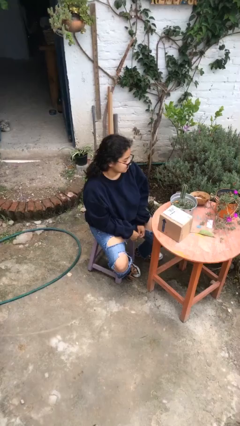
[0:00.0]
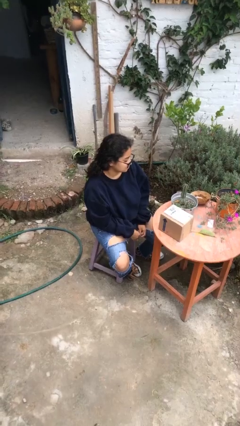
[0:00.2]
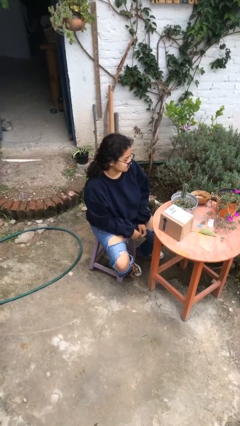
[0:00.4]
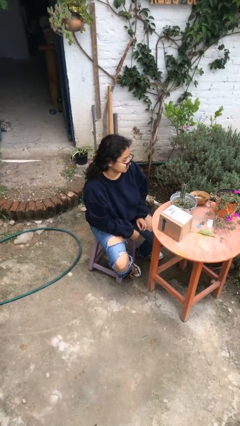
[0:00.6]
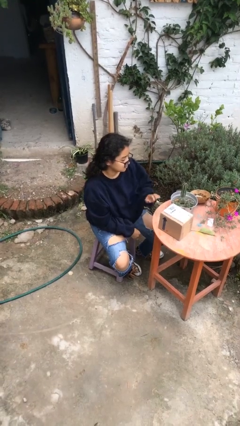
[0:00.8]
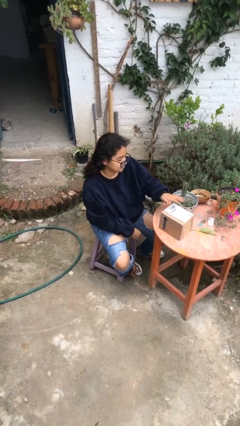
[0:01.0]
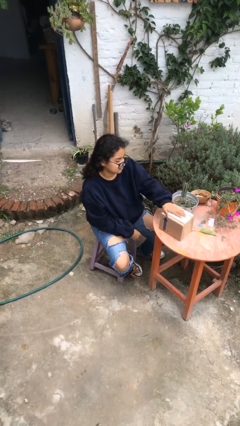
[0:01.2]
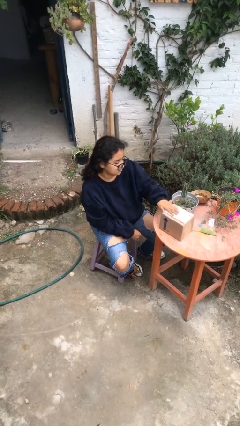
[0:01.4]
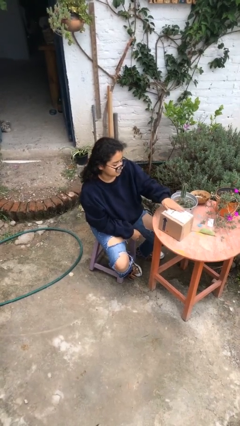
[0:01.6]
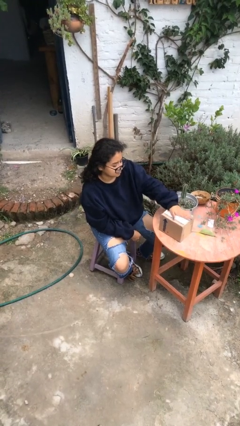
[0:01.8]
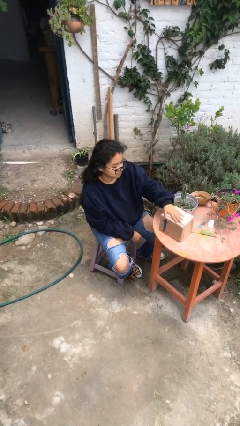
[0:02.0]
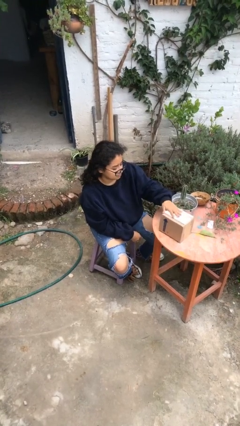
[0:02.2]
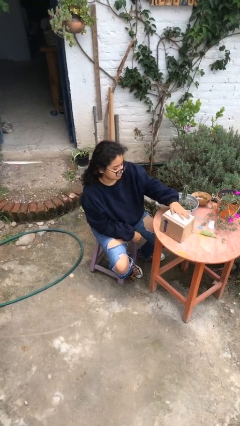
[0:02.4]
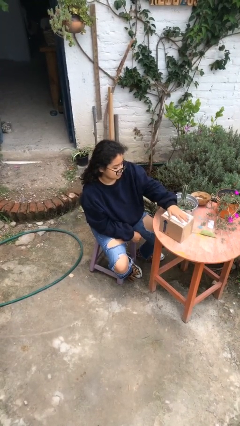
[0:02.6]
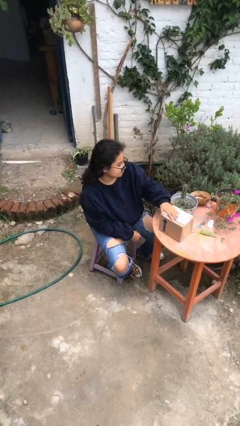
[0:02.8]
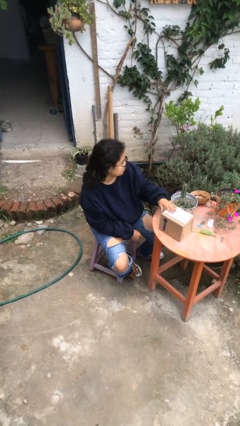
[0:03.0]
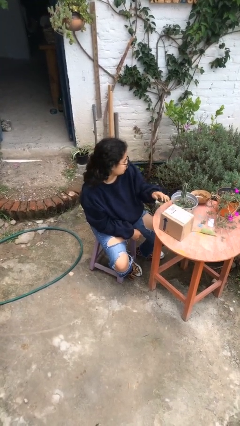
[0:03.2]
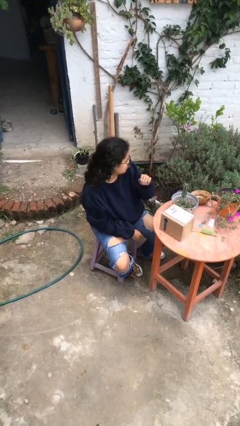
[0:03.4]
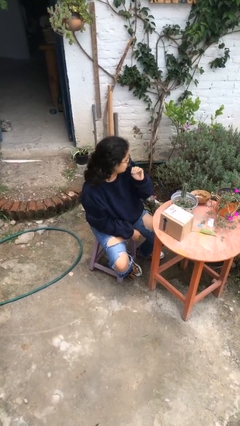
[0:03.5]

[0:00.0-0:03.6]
person waves hand over object

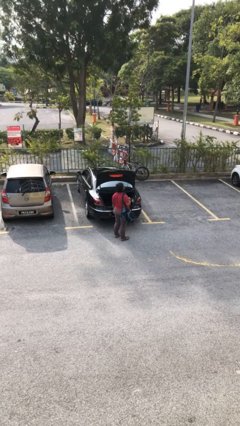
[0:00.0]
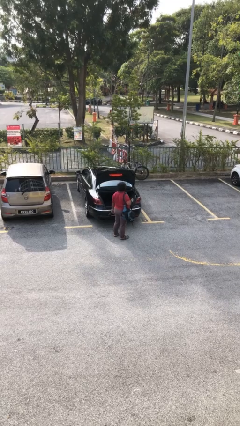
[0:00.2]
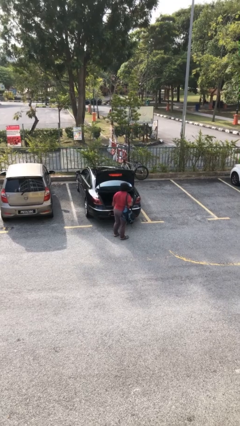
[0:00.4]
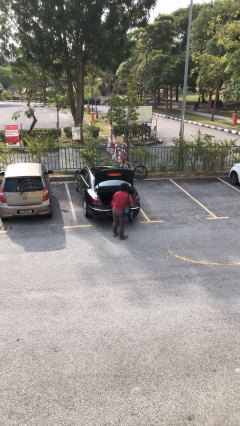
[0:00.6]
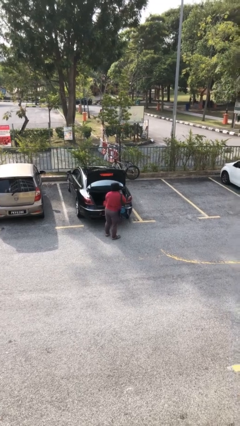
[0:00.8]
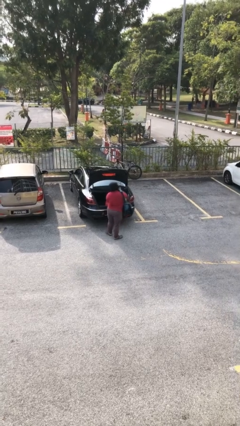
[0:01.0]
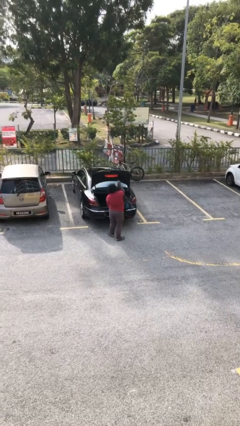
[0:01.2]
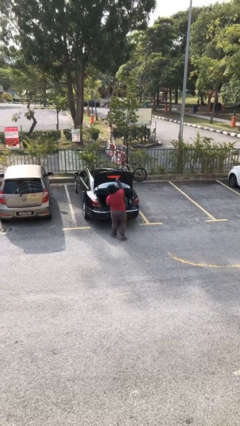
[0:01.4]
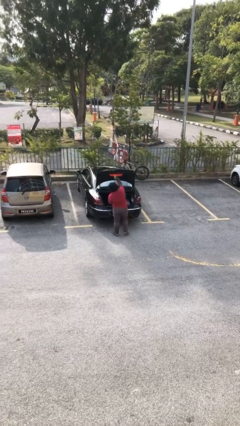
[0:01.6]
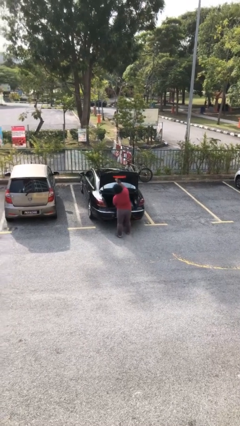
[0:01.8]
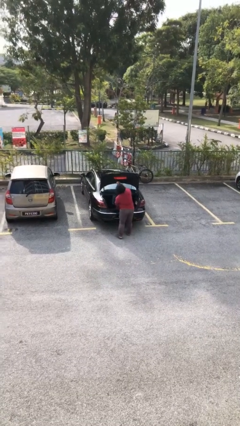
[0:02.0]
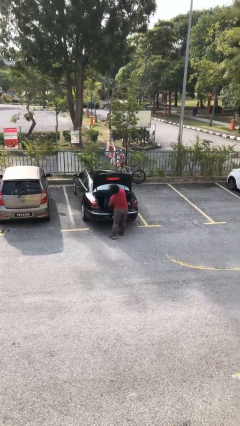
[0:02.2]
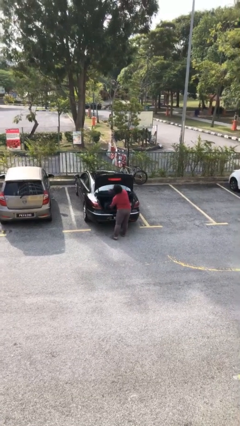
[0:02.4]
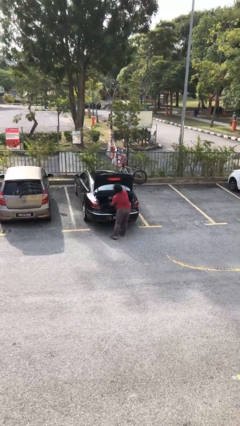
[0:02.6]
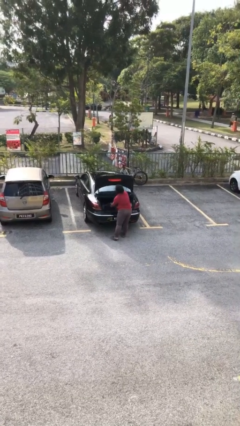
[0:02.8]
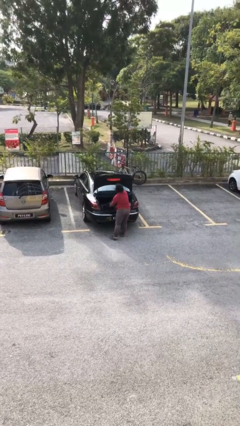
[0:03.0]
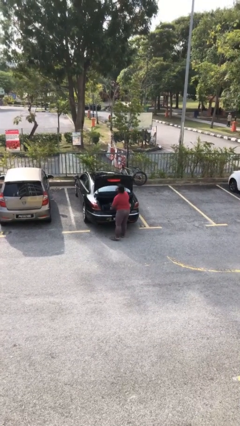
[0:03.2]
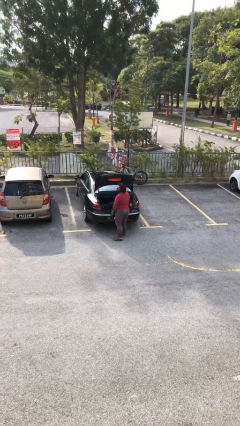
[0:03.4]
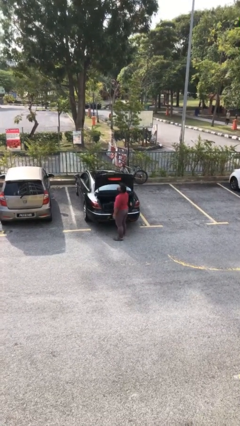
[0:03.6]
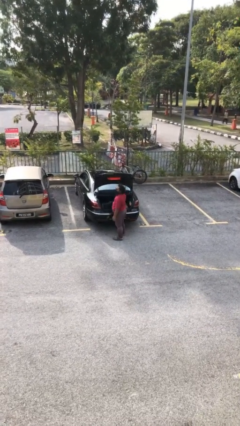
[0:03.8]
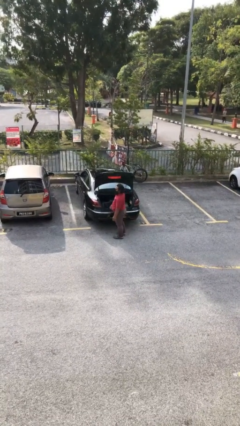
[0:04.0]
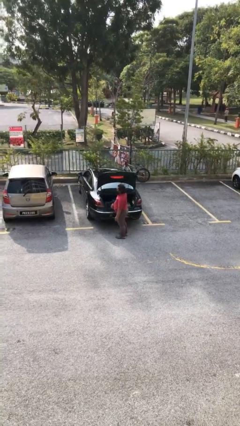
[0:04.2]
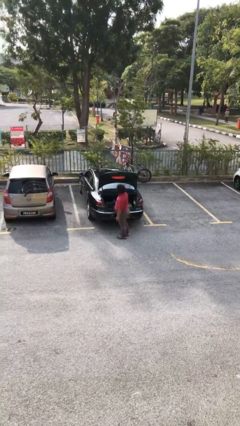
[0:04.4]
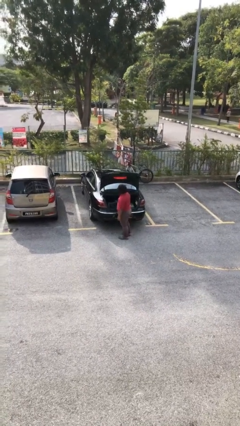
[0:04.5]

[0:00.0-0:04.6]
person loads car

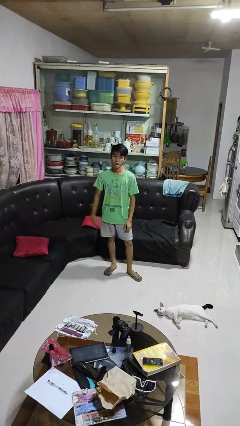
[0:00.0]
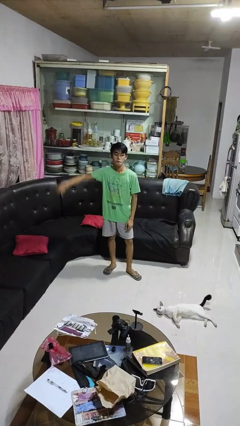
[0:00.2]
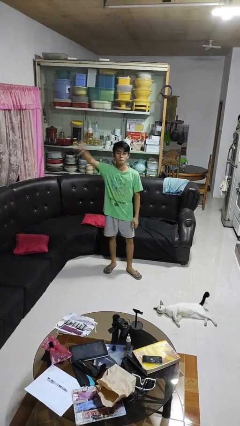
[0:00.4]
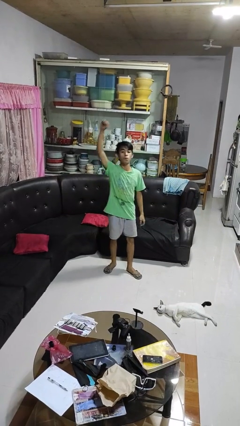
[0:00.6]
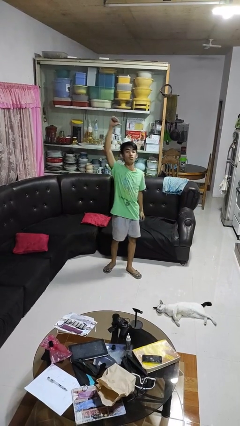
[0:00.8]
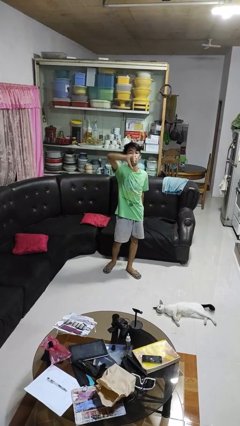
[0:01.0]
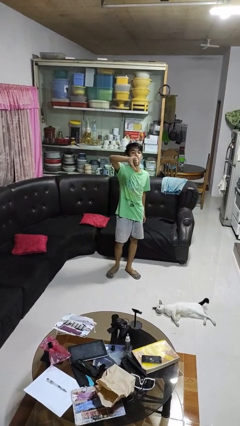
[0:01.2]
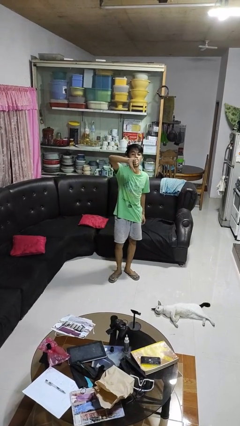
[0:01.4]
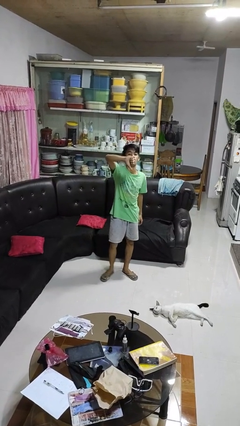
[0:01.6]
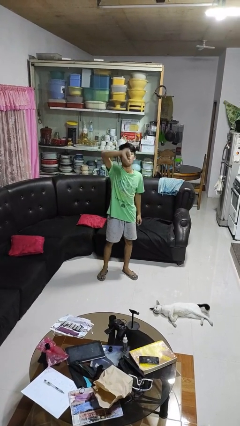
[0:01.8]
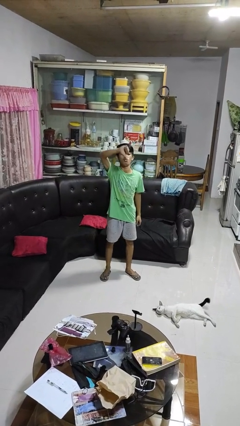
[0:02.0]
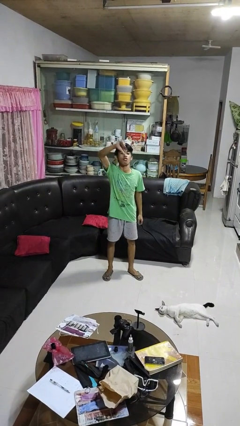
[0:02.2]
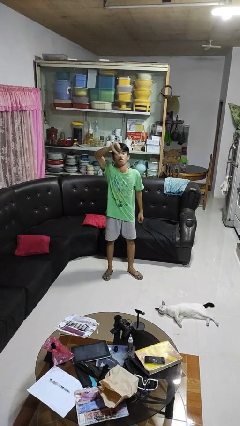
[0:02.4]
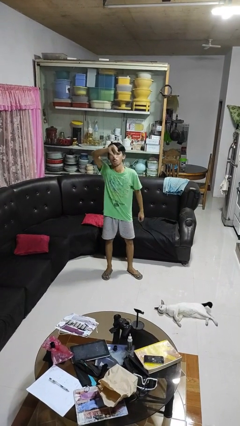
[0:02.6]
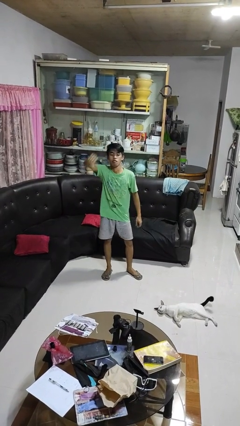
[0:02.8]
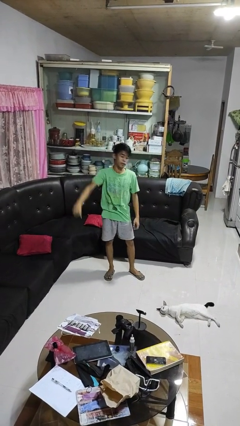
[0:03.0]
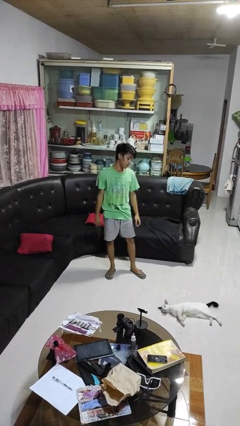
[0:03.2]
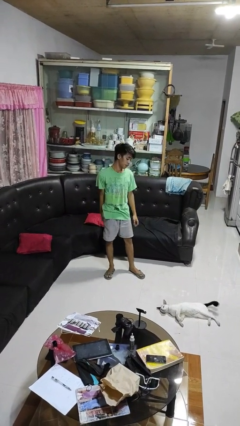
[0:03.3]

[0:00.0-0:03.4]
person gestures thumbs down

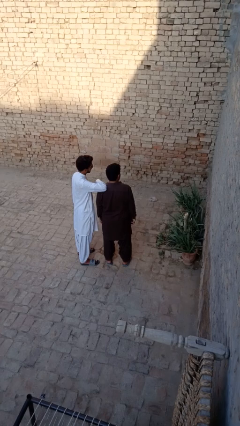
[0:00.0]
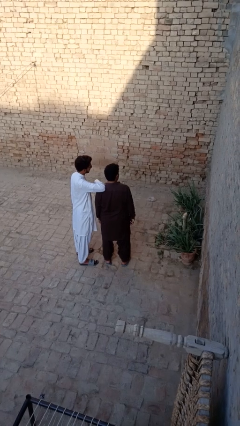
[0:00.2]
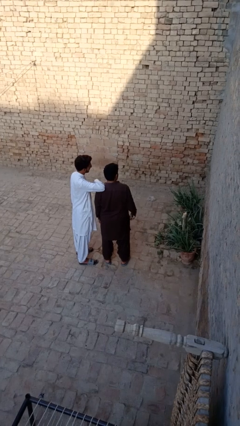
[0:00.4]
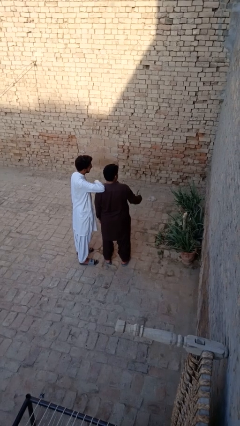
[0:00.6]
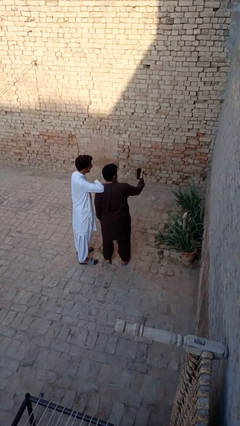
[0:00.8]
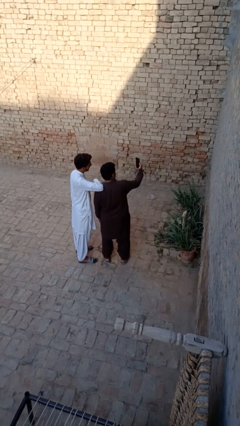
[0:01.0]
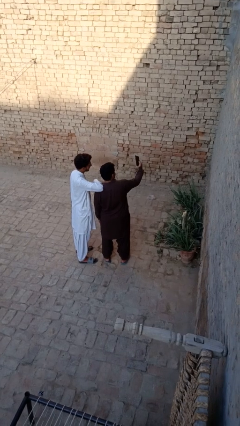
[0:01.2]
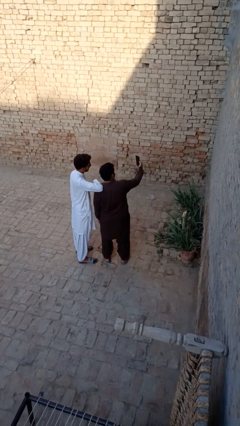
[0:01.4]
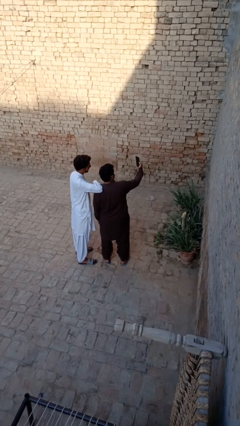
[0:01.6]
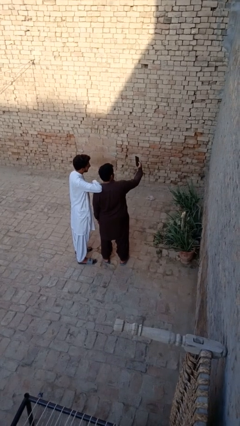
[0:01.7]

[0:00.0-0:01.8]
person takes selfie with person

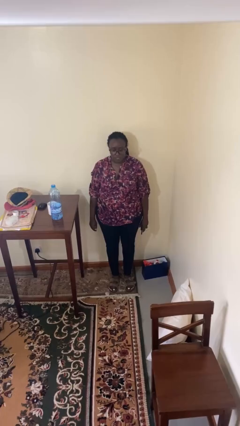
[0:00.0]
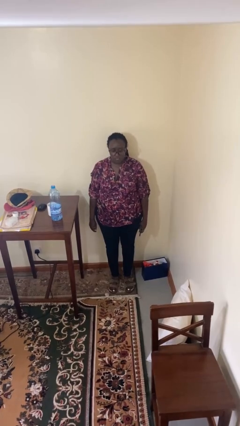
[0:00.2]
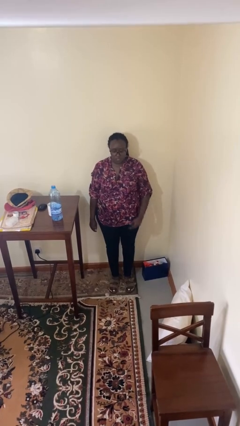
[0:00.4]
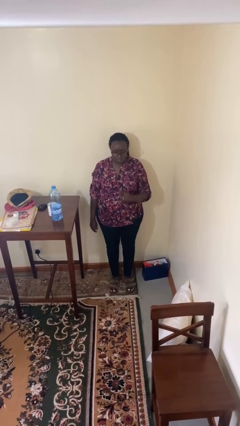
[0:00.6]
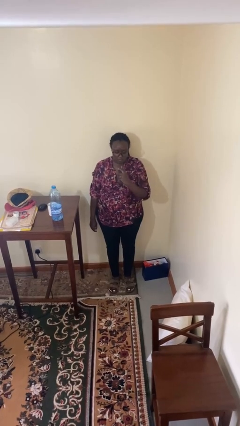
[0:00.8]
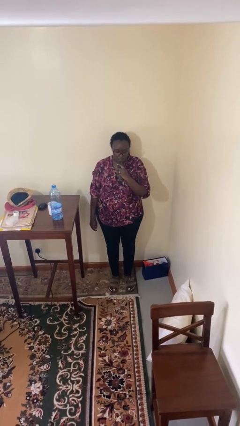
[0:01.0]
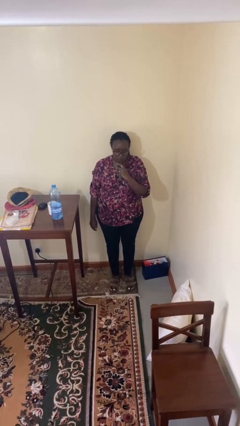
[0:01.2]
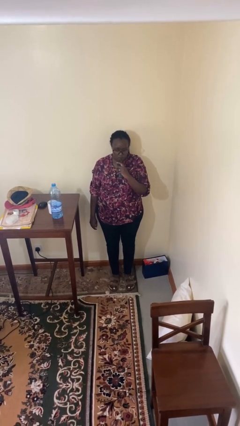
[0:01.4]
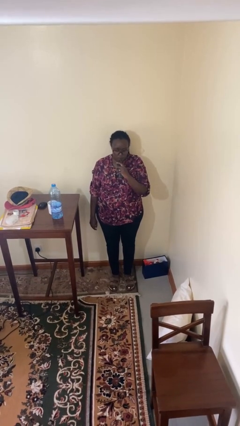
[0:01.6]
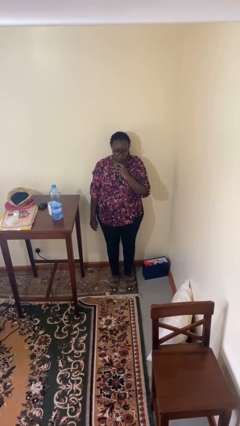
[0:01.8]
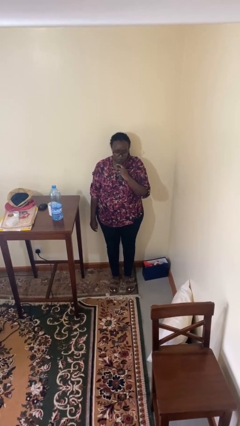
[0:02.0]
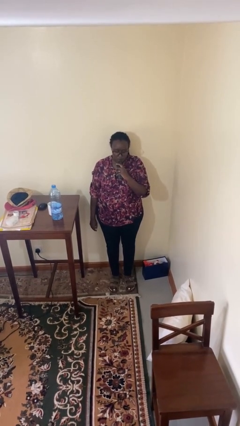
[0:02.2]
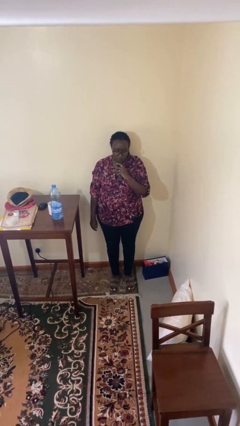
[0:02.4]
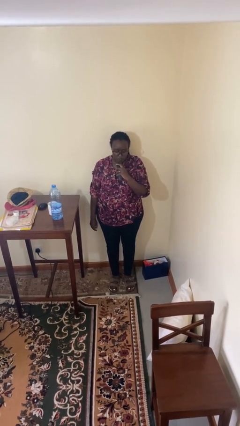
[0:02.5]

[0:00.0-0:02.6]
person vapes

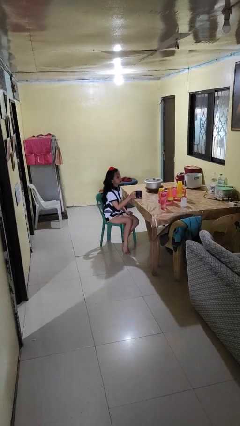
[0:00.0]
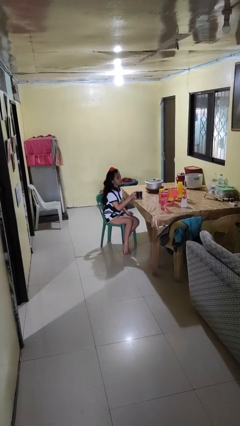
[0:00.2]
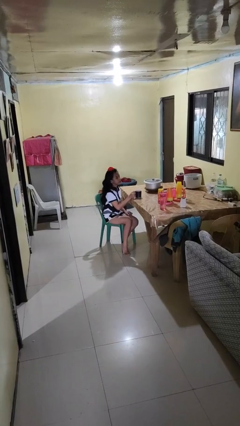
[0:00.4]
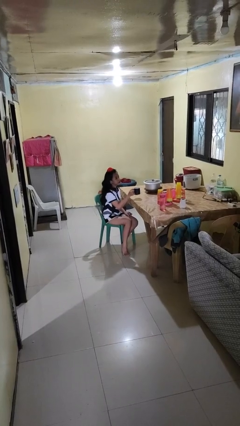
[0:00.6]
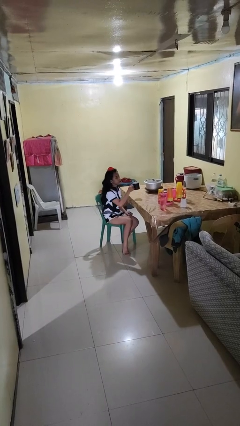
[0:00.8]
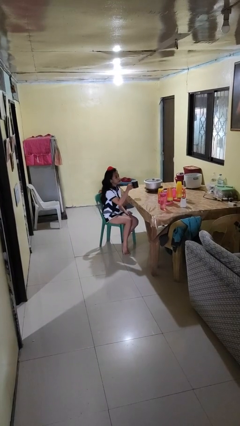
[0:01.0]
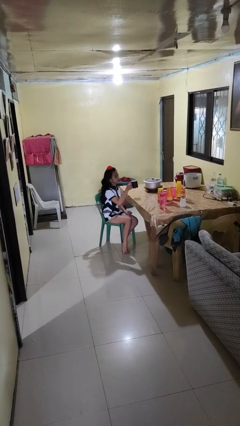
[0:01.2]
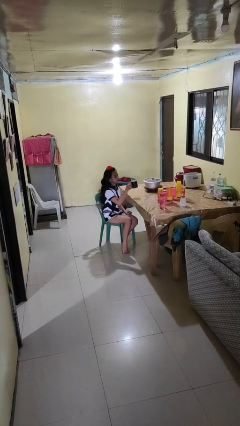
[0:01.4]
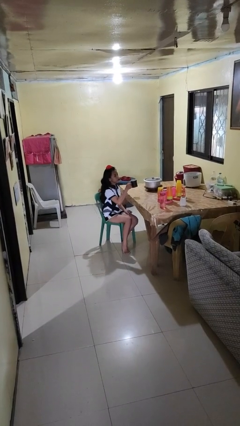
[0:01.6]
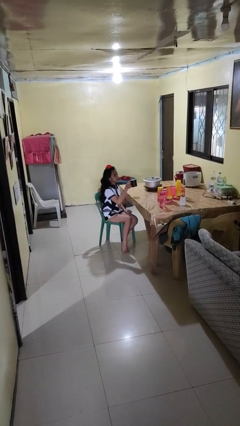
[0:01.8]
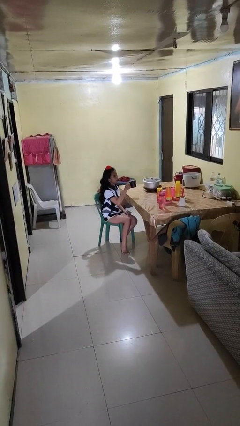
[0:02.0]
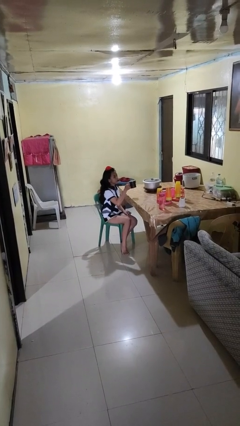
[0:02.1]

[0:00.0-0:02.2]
person picks up object from table
